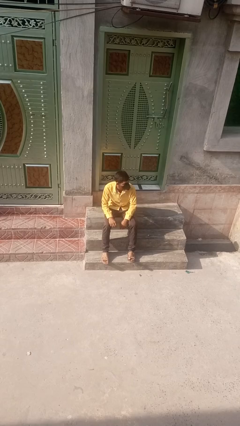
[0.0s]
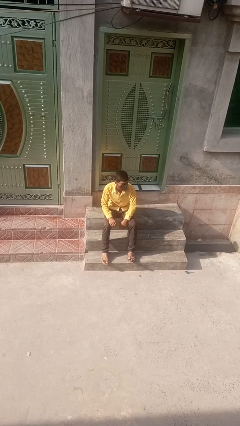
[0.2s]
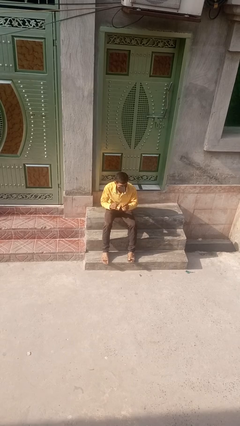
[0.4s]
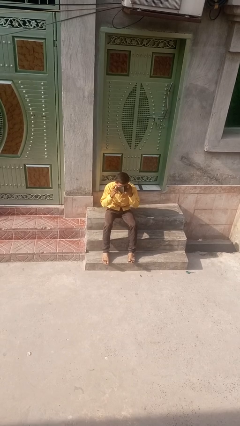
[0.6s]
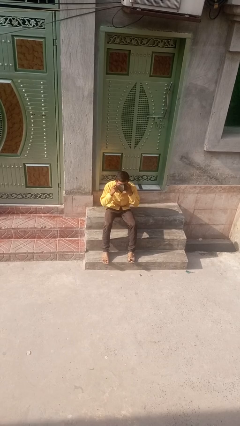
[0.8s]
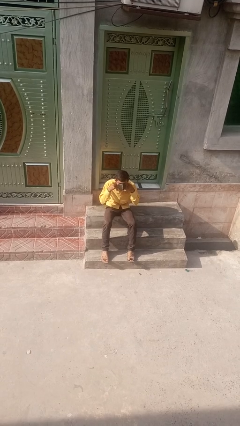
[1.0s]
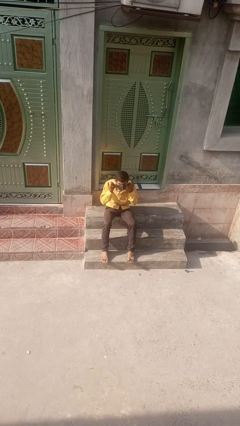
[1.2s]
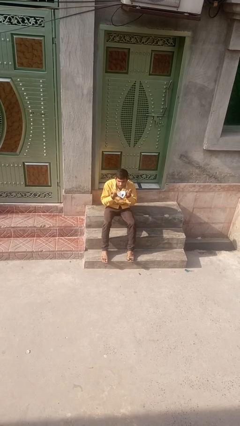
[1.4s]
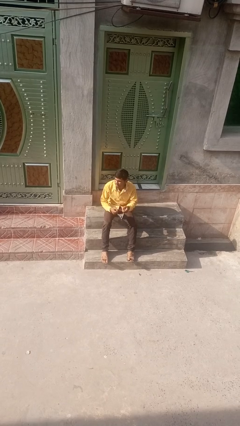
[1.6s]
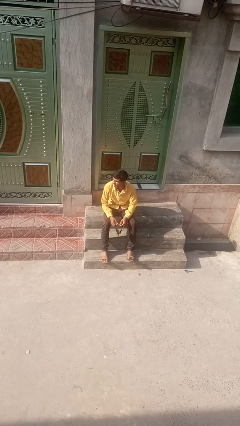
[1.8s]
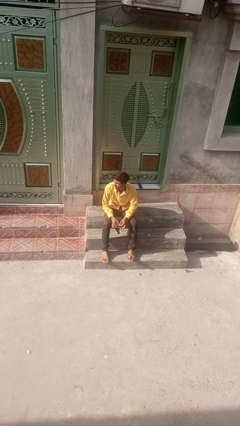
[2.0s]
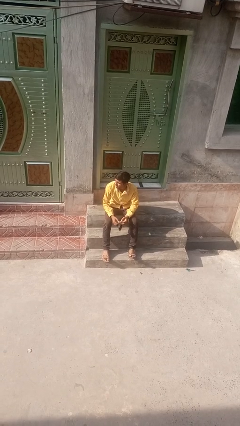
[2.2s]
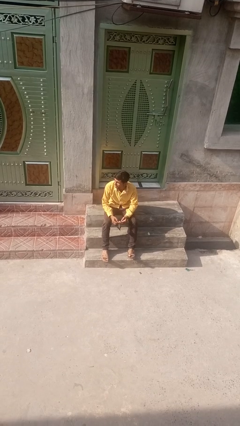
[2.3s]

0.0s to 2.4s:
person takes off facemask

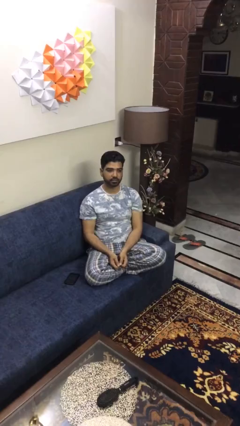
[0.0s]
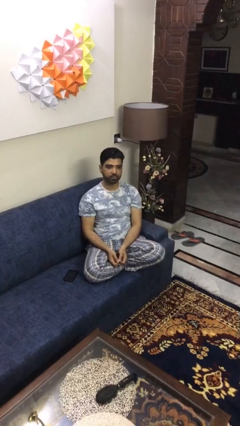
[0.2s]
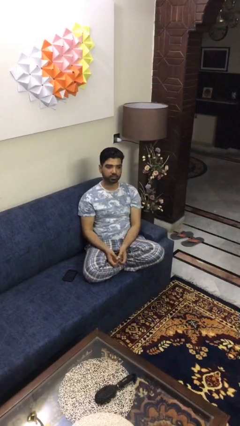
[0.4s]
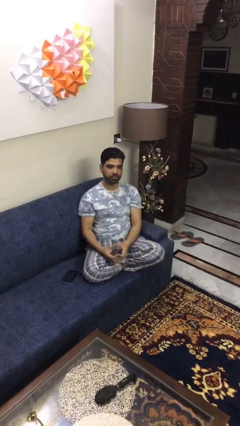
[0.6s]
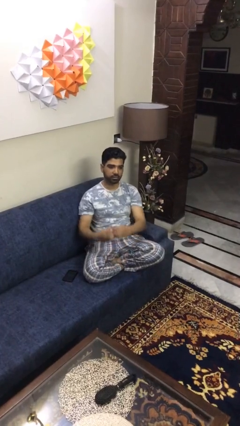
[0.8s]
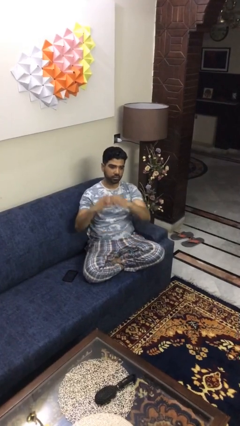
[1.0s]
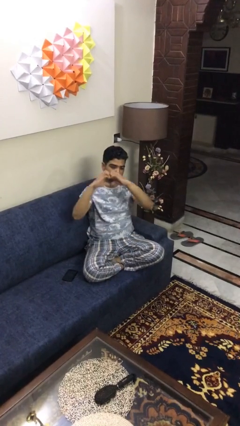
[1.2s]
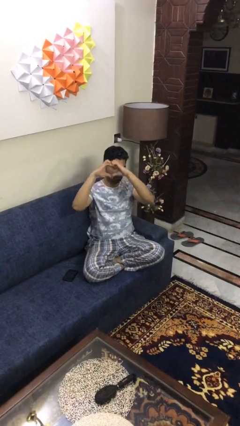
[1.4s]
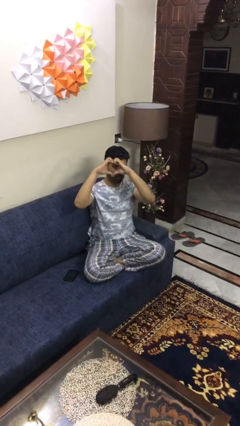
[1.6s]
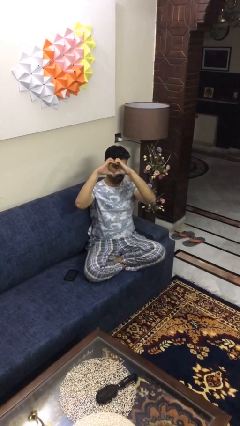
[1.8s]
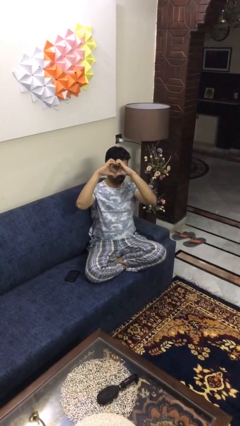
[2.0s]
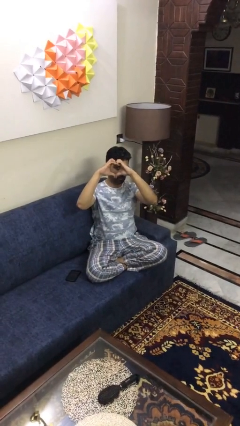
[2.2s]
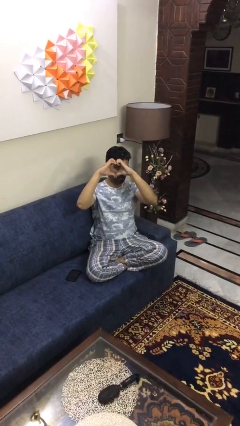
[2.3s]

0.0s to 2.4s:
person gestures heart

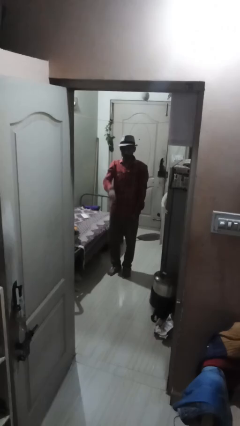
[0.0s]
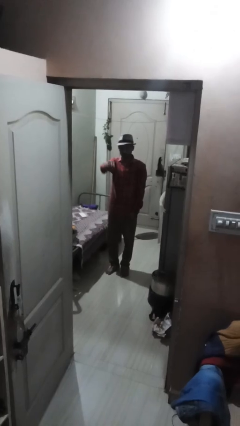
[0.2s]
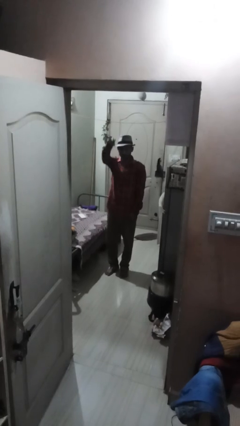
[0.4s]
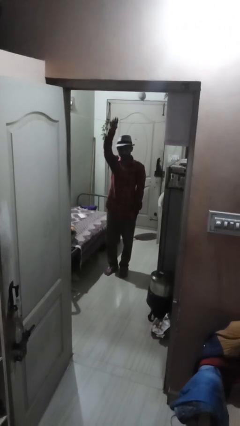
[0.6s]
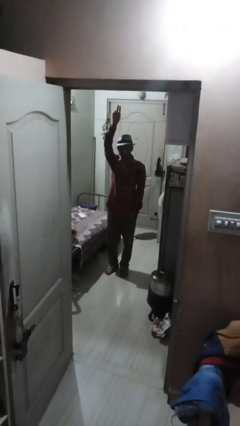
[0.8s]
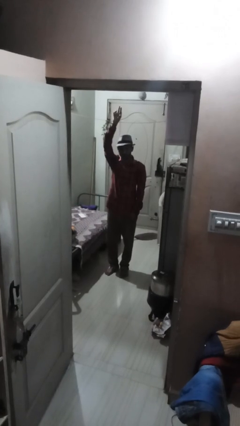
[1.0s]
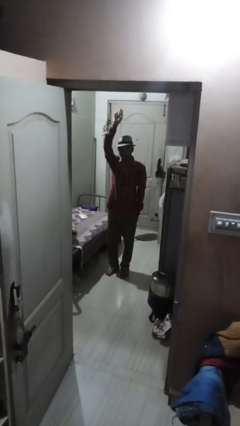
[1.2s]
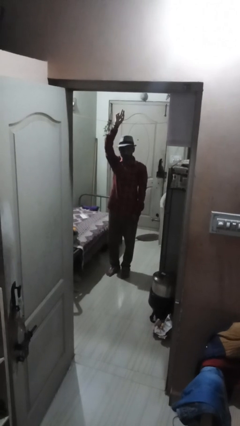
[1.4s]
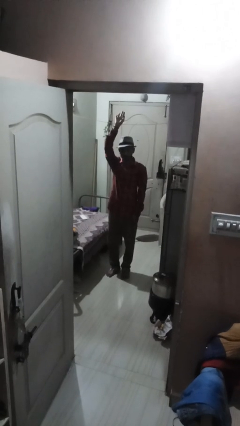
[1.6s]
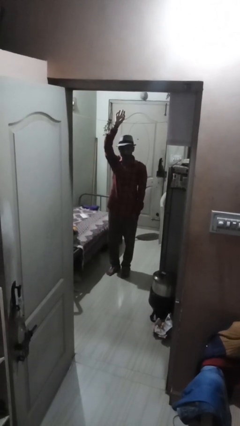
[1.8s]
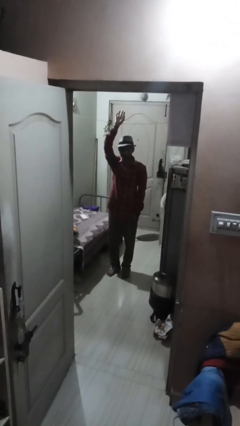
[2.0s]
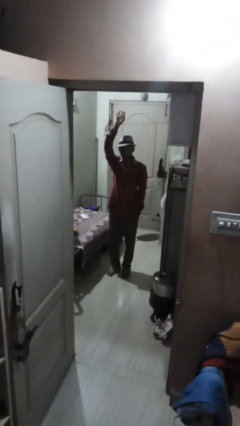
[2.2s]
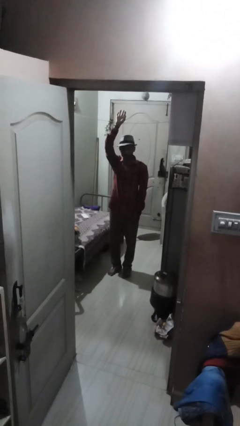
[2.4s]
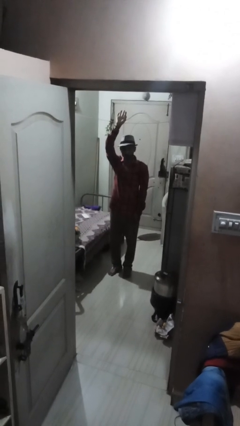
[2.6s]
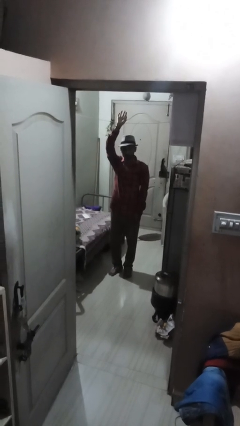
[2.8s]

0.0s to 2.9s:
person gestures swipe up

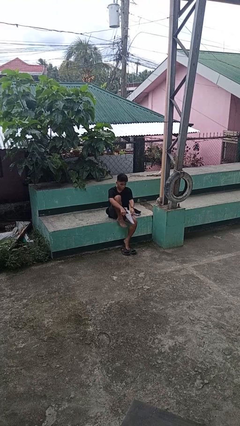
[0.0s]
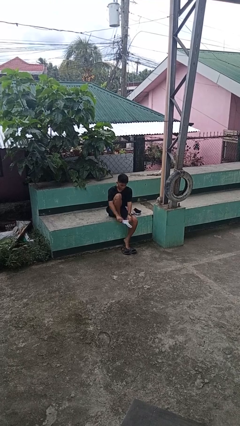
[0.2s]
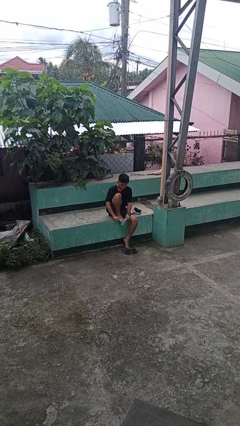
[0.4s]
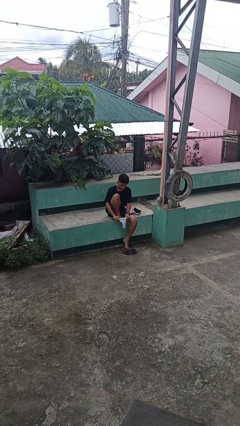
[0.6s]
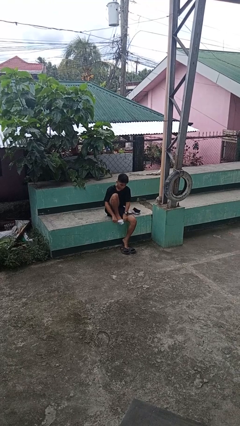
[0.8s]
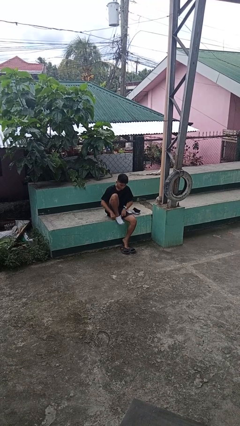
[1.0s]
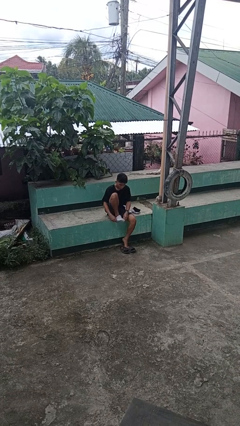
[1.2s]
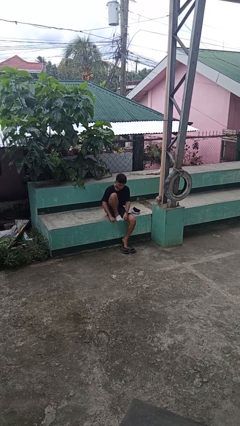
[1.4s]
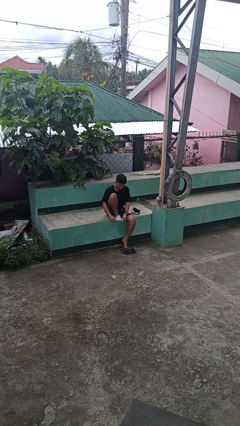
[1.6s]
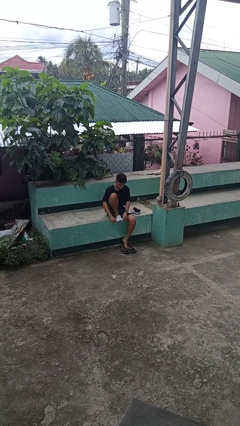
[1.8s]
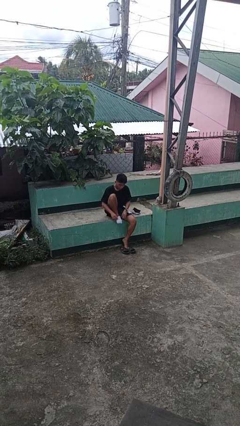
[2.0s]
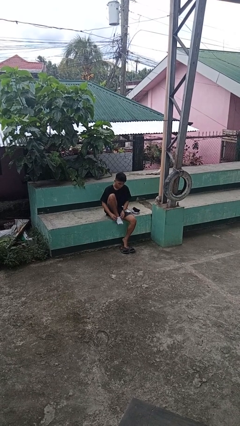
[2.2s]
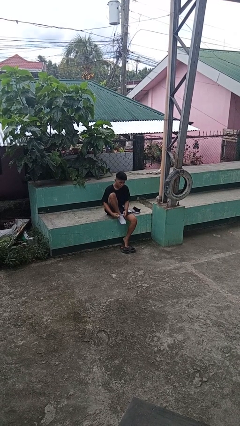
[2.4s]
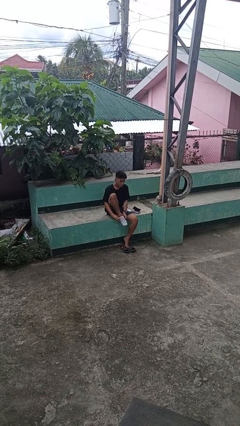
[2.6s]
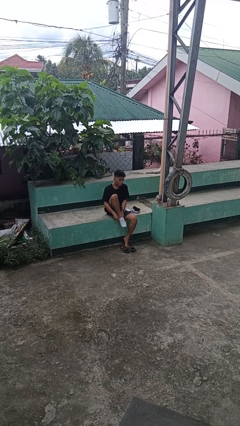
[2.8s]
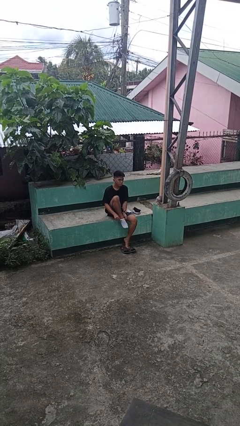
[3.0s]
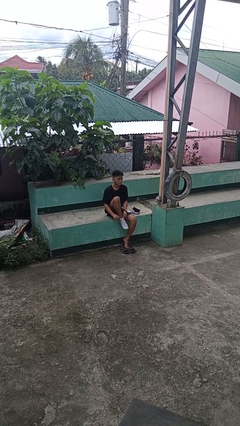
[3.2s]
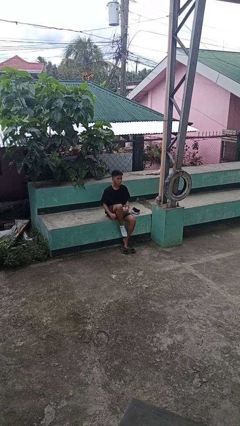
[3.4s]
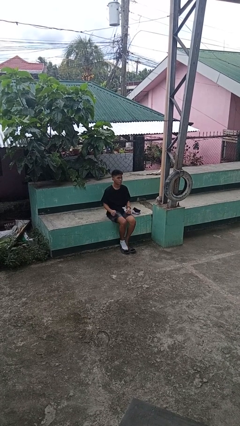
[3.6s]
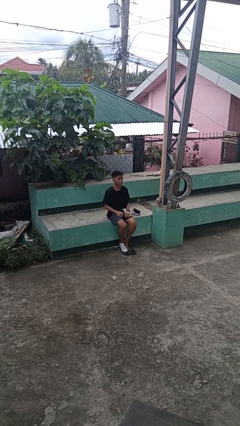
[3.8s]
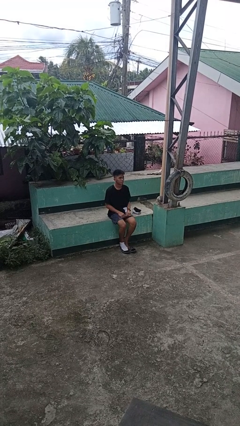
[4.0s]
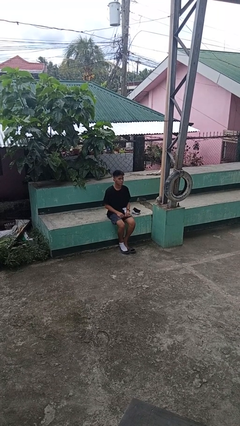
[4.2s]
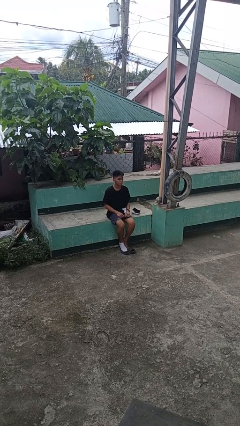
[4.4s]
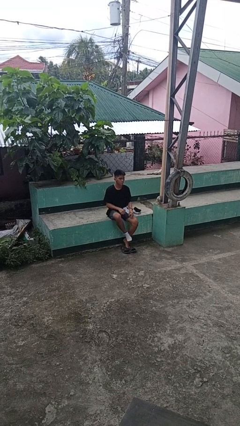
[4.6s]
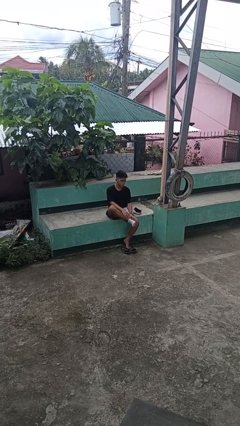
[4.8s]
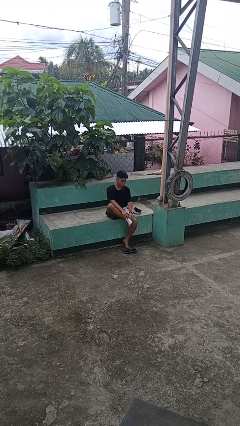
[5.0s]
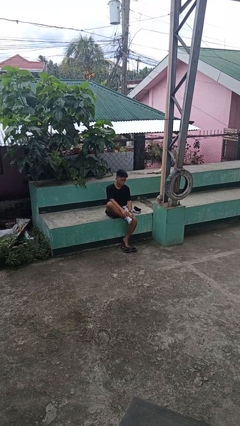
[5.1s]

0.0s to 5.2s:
person puts on socks

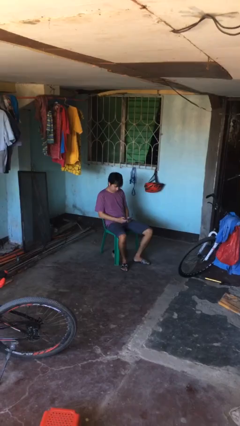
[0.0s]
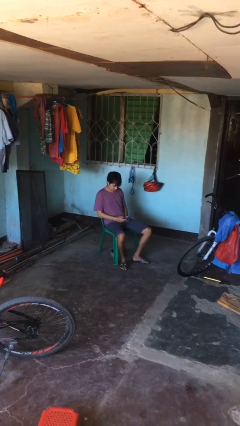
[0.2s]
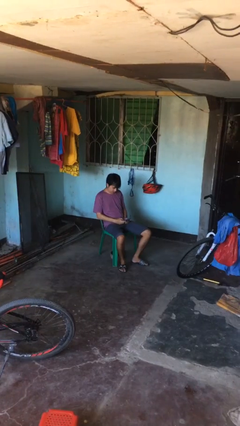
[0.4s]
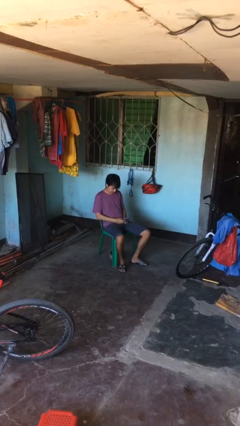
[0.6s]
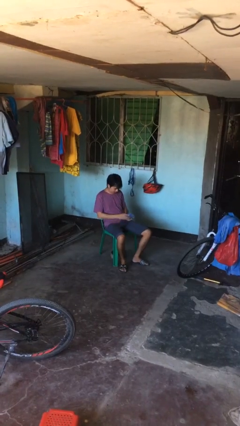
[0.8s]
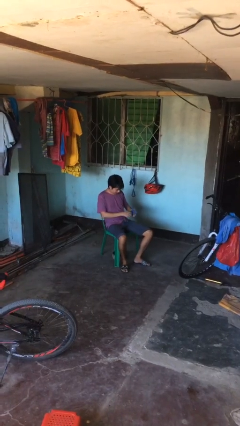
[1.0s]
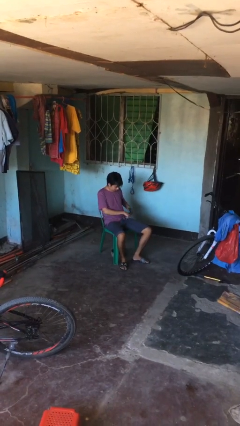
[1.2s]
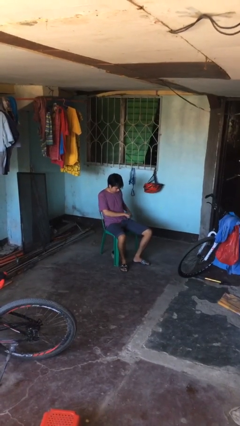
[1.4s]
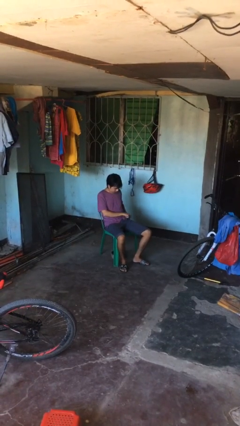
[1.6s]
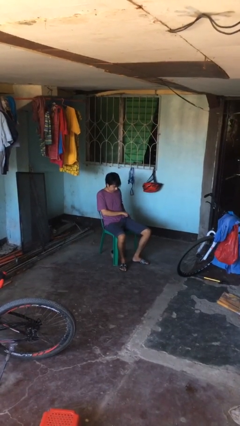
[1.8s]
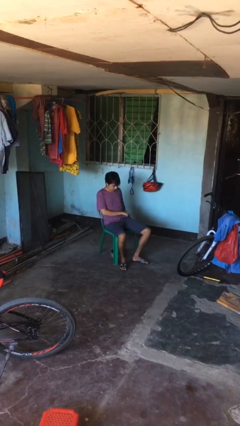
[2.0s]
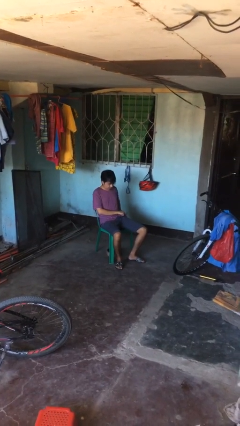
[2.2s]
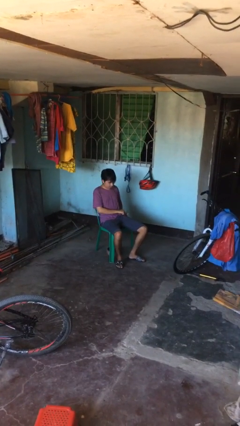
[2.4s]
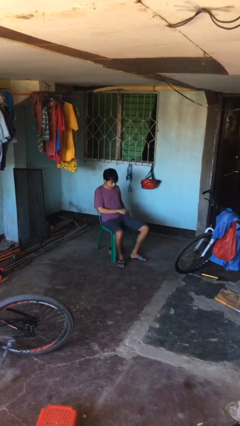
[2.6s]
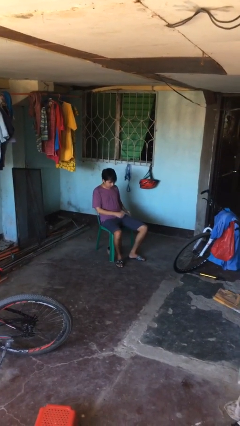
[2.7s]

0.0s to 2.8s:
person puts phone into pocket

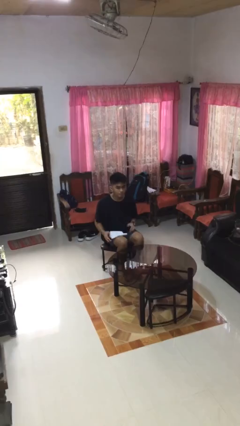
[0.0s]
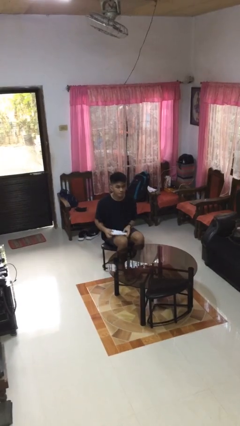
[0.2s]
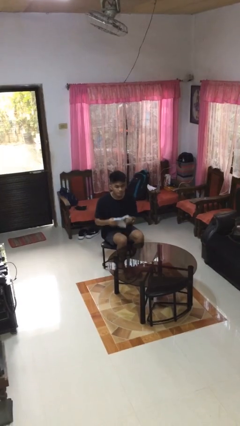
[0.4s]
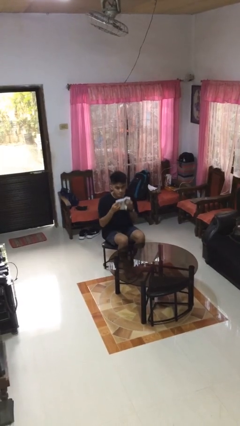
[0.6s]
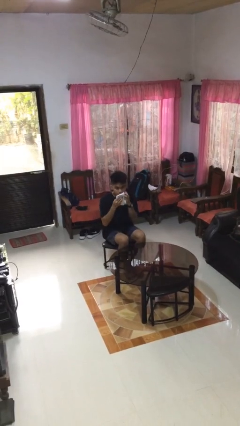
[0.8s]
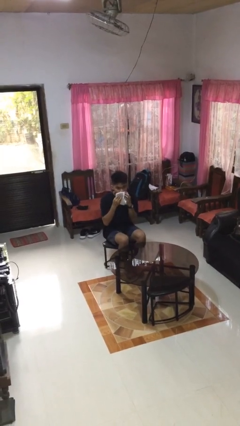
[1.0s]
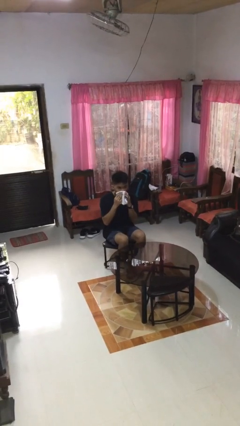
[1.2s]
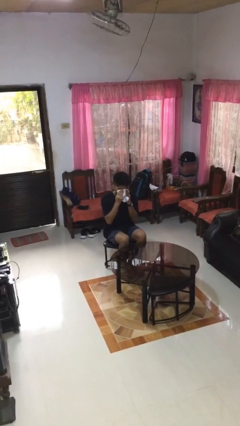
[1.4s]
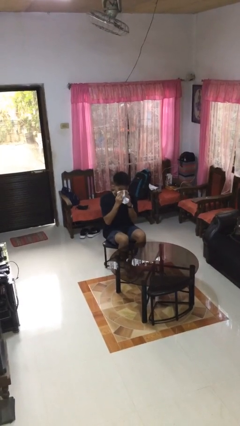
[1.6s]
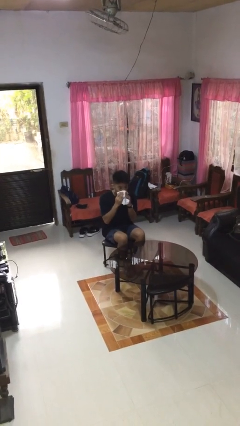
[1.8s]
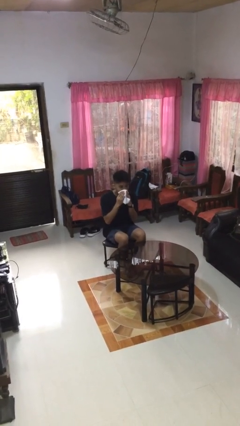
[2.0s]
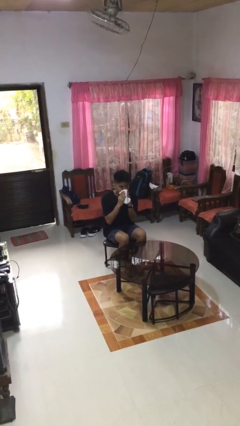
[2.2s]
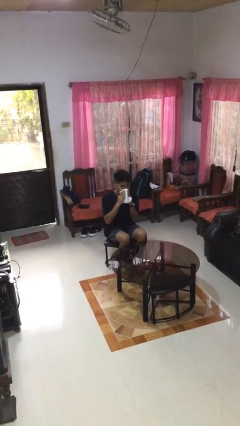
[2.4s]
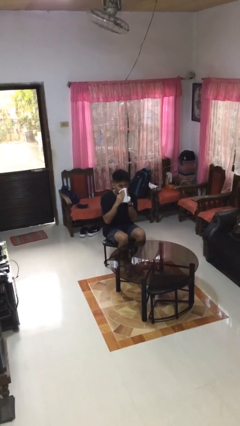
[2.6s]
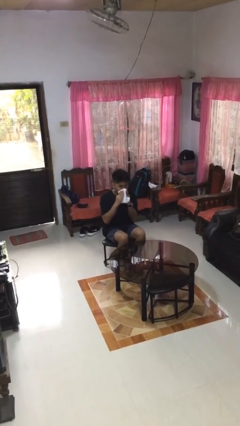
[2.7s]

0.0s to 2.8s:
person wipes mouth with napkin
